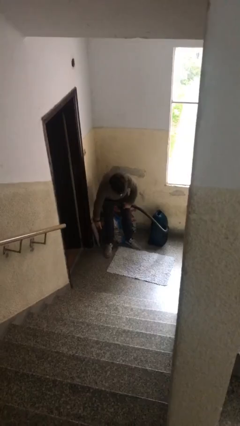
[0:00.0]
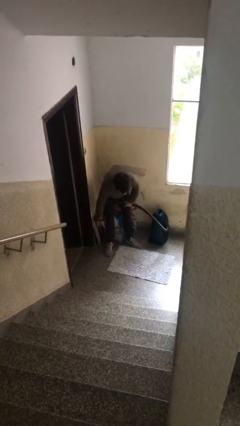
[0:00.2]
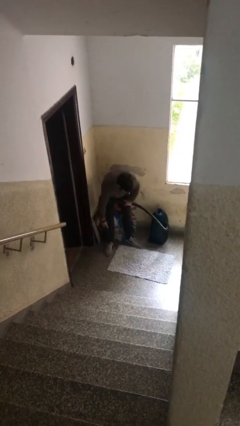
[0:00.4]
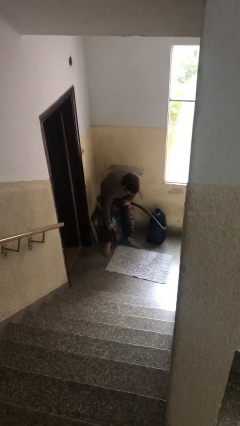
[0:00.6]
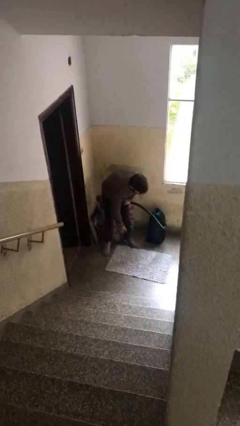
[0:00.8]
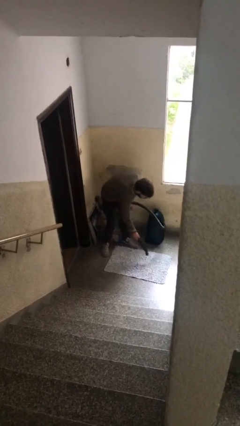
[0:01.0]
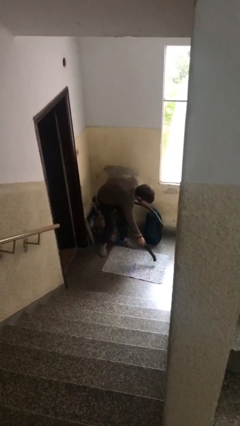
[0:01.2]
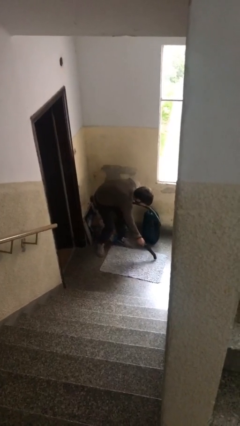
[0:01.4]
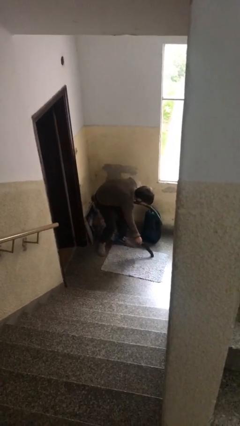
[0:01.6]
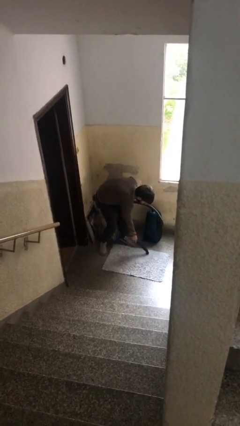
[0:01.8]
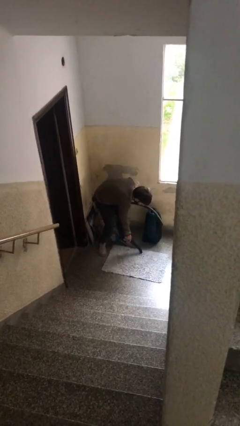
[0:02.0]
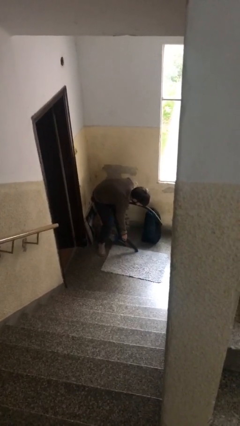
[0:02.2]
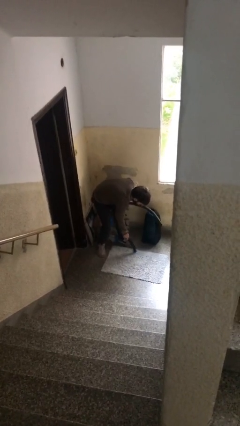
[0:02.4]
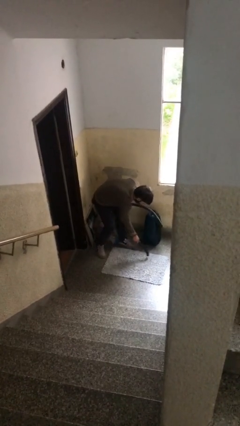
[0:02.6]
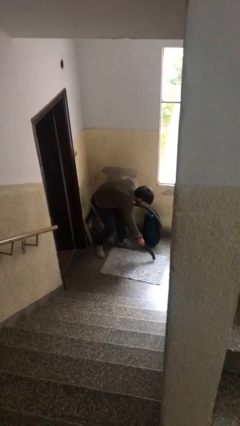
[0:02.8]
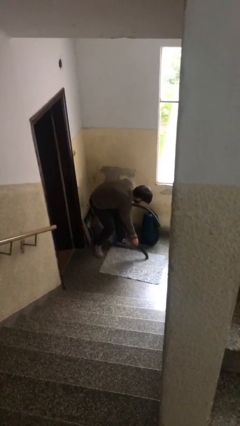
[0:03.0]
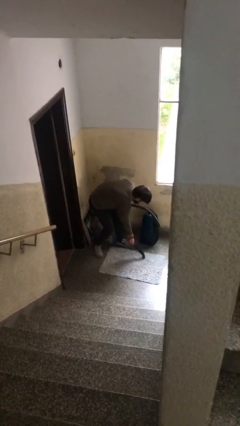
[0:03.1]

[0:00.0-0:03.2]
person vacuums carpet

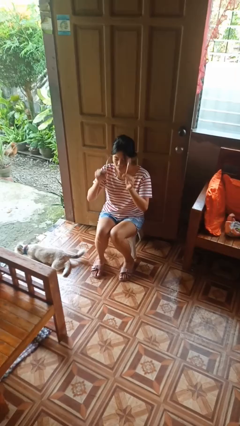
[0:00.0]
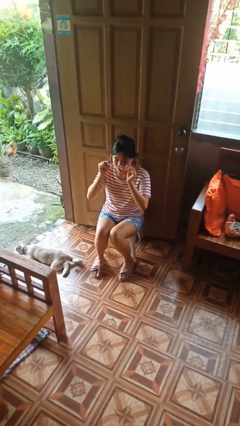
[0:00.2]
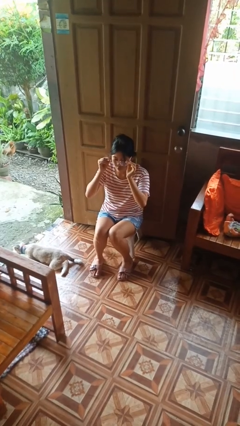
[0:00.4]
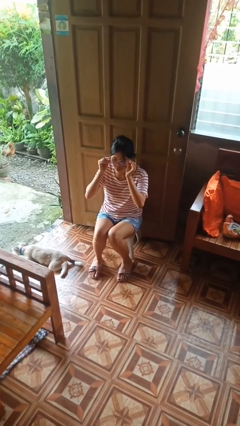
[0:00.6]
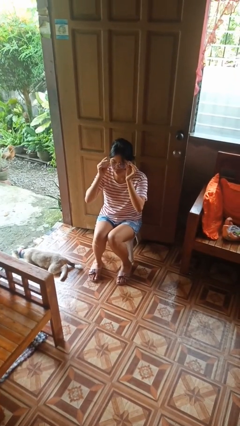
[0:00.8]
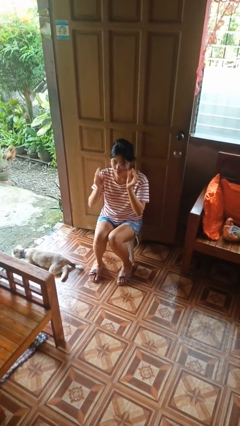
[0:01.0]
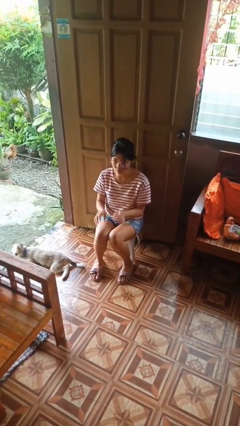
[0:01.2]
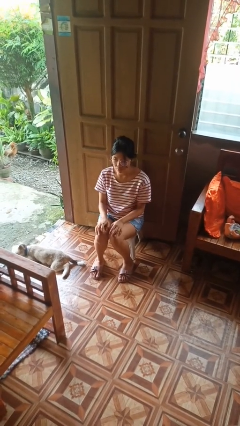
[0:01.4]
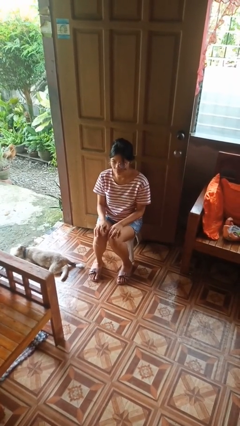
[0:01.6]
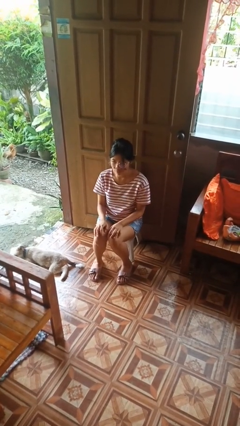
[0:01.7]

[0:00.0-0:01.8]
person puts on glasses

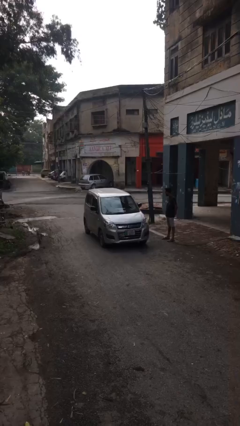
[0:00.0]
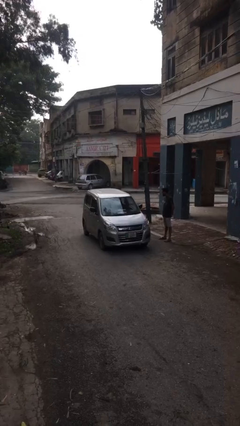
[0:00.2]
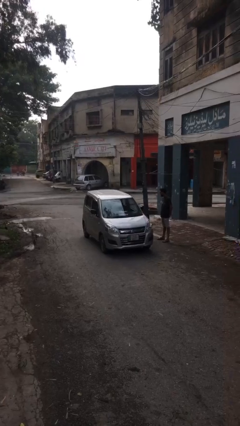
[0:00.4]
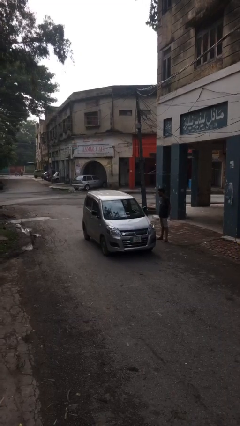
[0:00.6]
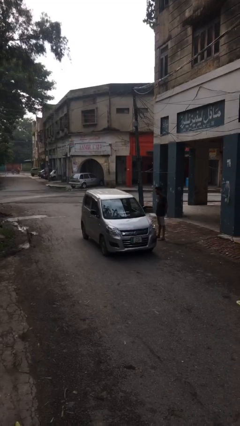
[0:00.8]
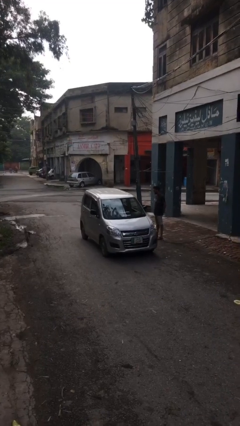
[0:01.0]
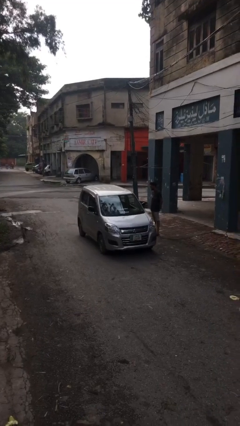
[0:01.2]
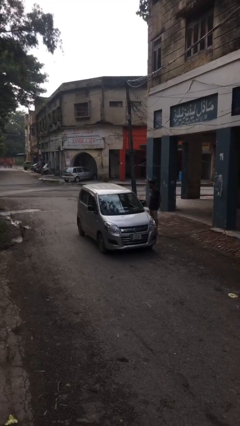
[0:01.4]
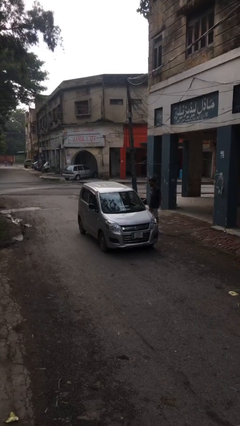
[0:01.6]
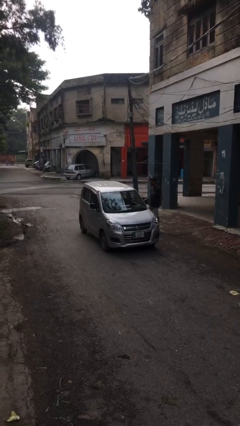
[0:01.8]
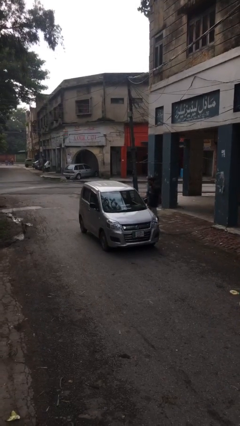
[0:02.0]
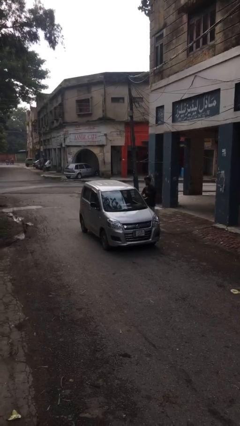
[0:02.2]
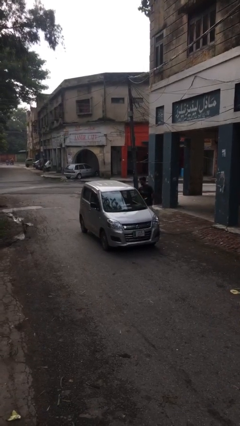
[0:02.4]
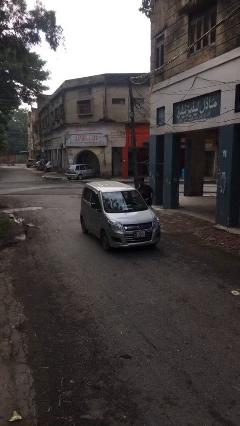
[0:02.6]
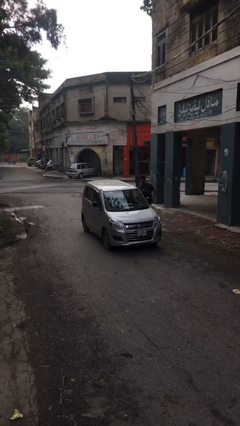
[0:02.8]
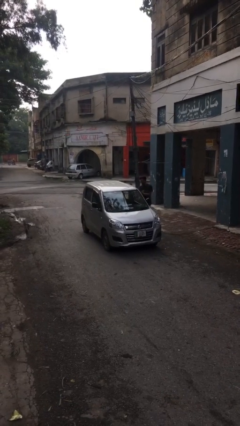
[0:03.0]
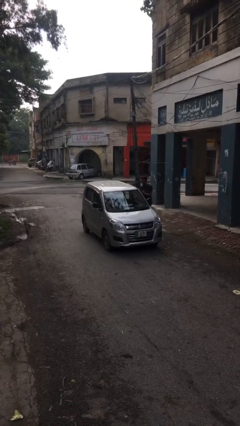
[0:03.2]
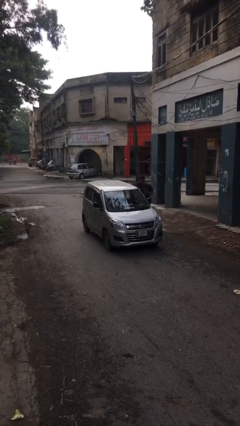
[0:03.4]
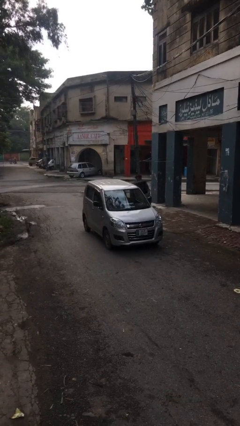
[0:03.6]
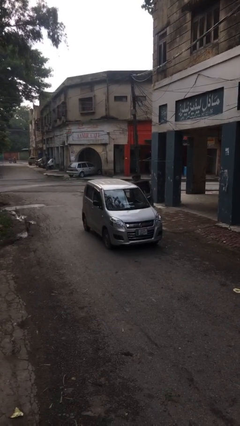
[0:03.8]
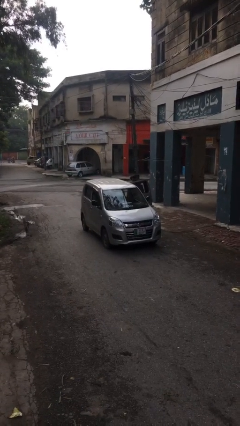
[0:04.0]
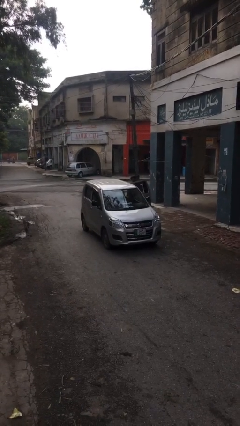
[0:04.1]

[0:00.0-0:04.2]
car picks up person

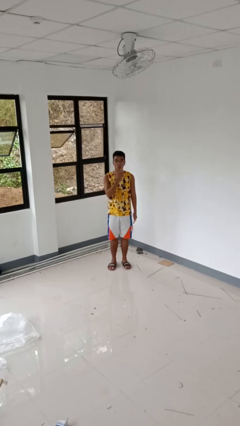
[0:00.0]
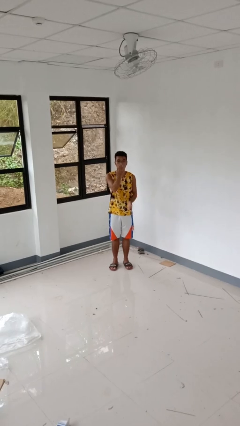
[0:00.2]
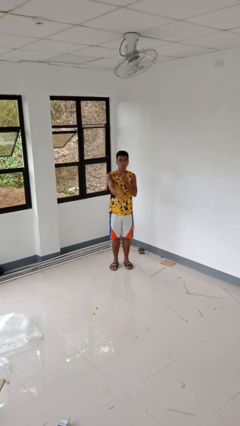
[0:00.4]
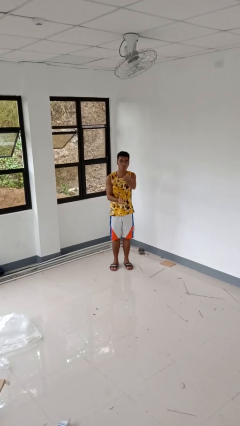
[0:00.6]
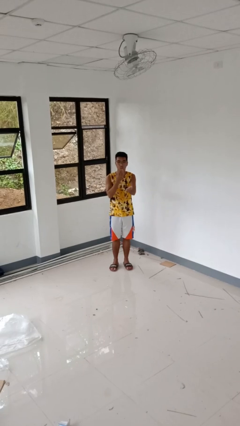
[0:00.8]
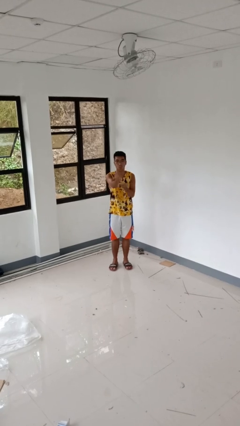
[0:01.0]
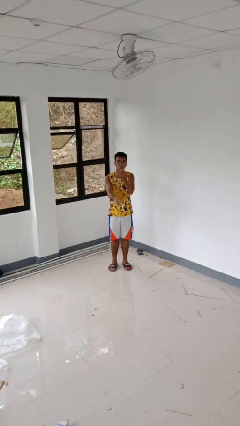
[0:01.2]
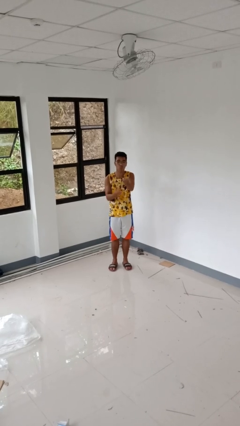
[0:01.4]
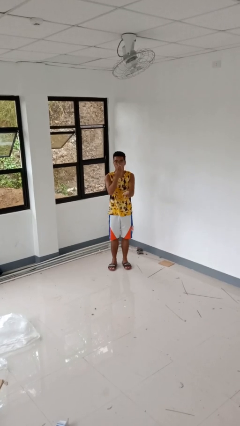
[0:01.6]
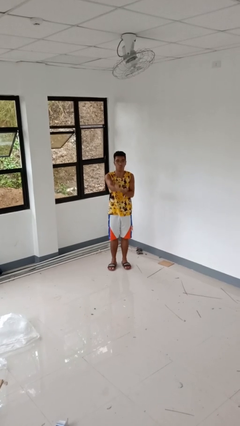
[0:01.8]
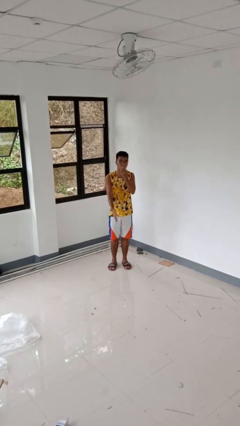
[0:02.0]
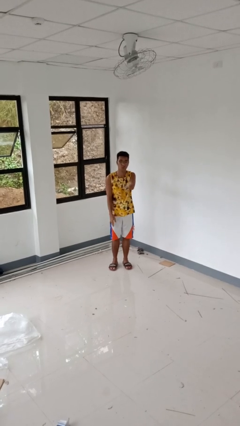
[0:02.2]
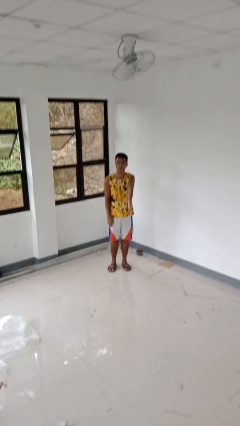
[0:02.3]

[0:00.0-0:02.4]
person gestures blow kiss

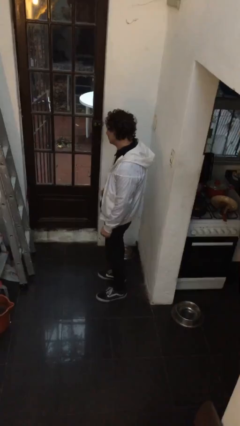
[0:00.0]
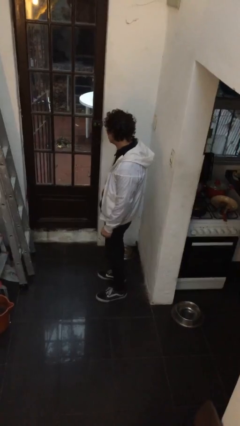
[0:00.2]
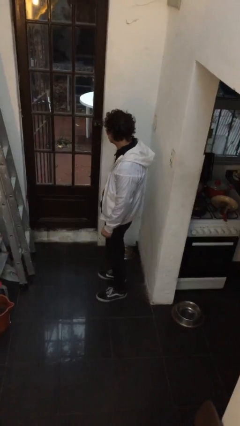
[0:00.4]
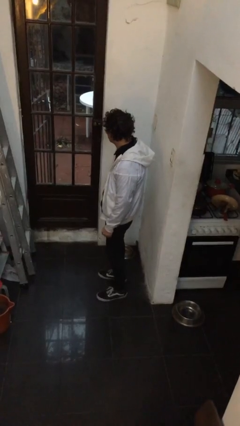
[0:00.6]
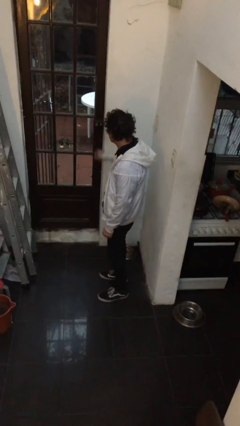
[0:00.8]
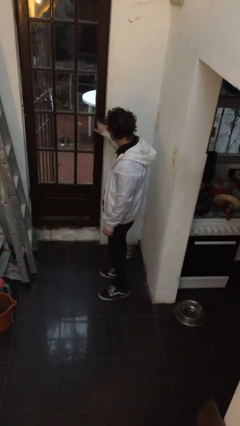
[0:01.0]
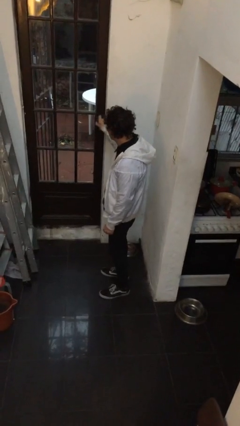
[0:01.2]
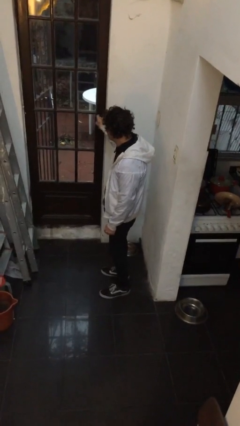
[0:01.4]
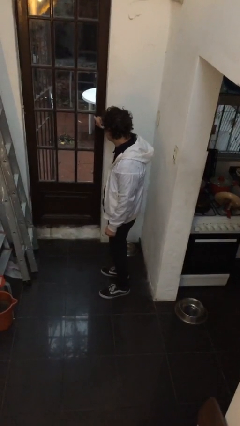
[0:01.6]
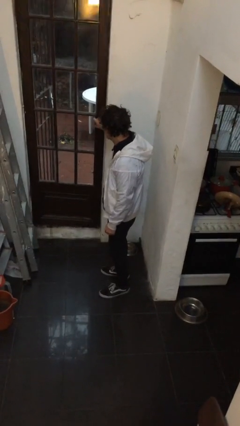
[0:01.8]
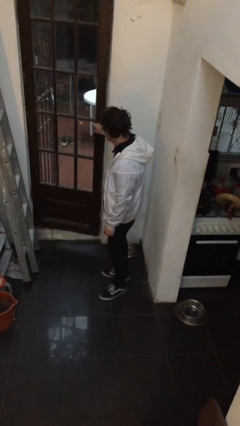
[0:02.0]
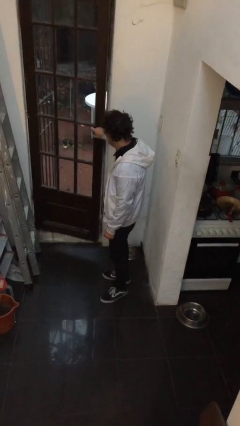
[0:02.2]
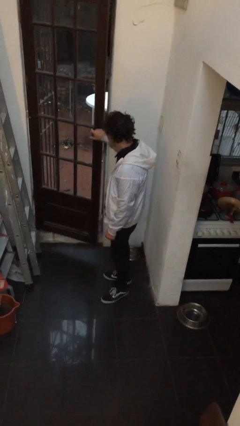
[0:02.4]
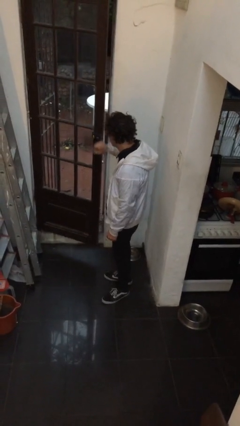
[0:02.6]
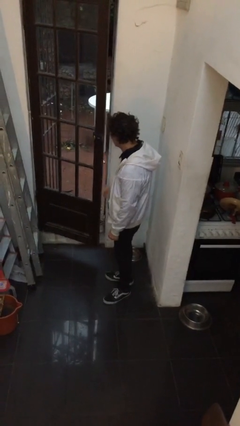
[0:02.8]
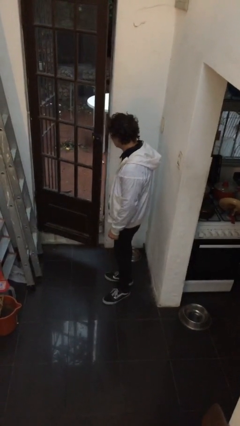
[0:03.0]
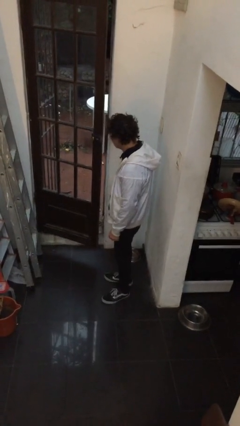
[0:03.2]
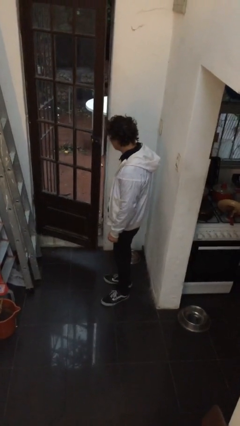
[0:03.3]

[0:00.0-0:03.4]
person opens facility door

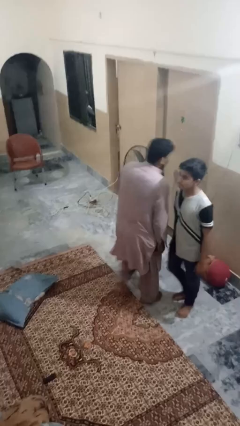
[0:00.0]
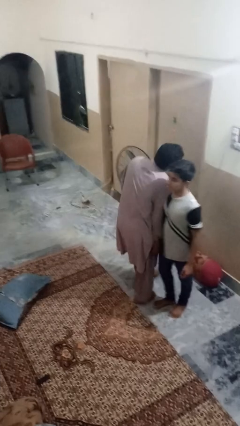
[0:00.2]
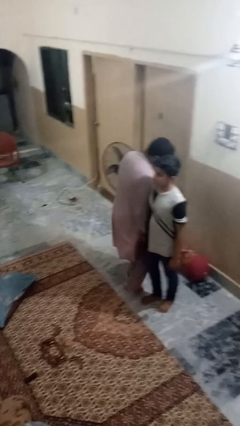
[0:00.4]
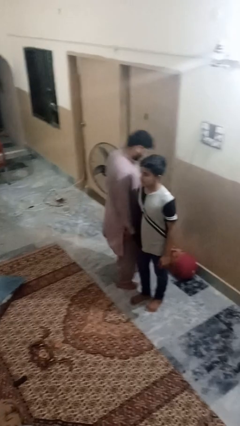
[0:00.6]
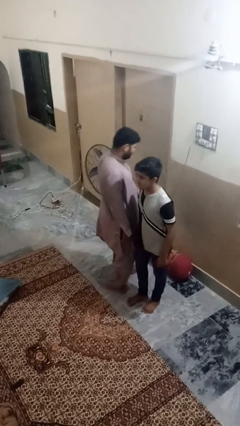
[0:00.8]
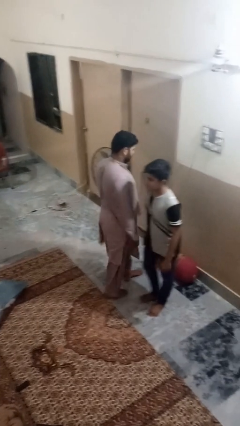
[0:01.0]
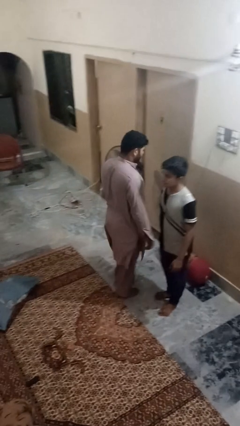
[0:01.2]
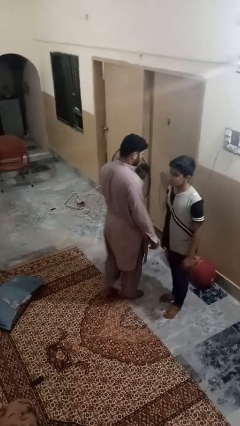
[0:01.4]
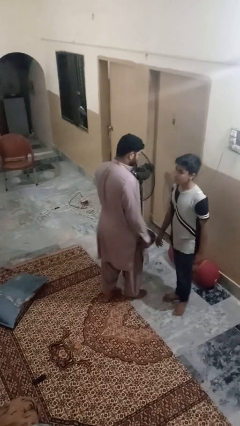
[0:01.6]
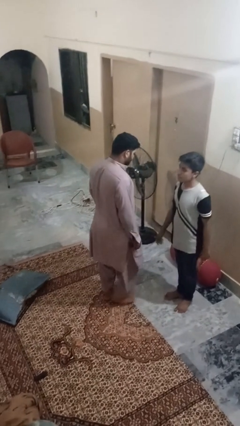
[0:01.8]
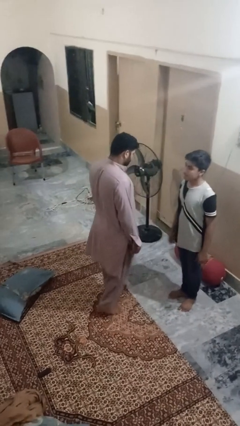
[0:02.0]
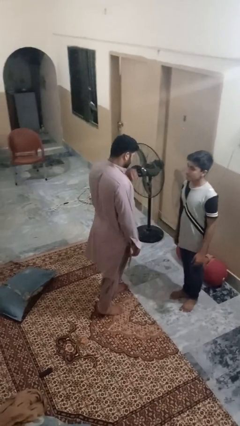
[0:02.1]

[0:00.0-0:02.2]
person bumps into person

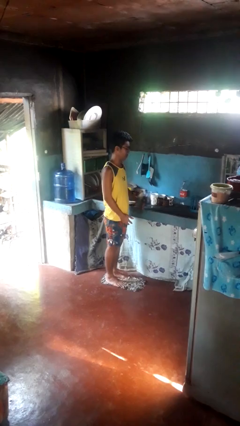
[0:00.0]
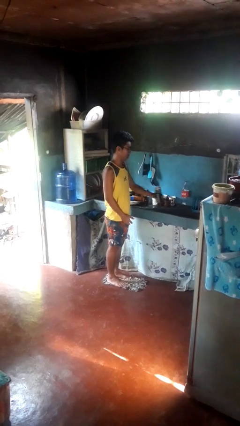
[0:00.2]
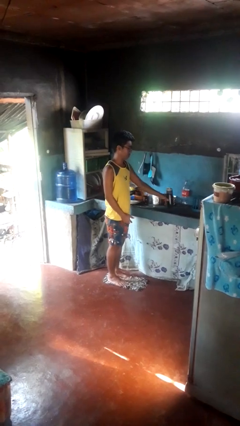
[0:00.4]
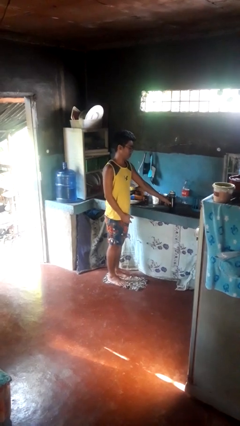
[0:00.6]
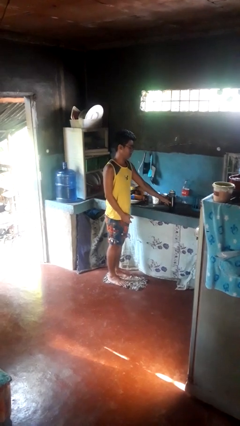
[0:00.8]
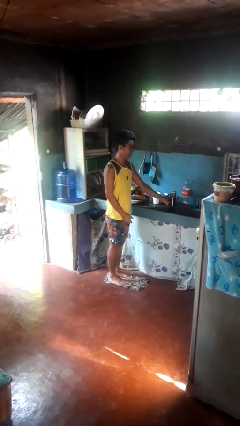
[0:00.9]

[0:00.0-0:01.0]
person puts down object on countertop
